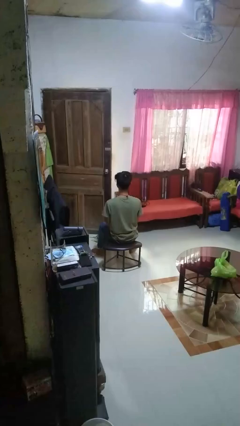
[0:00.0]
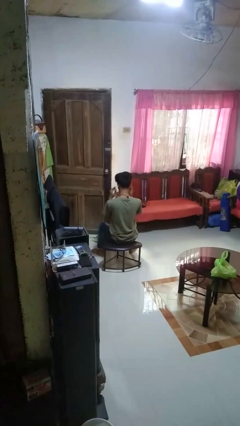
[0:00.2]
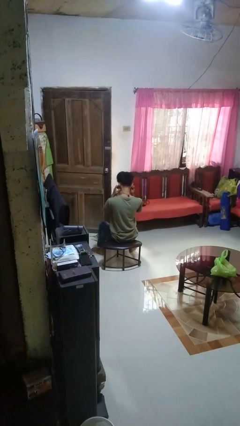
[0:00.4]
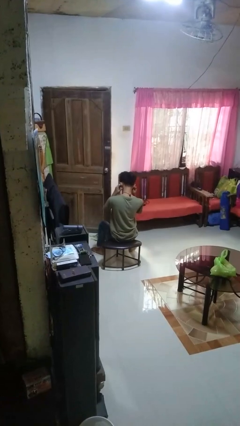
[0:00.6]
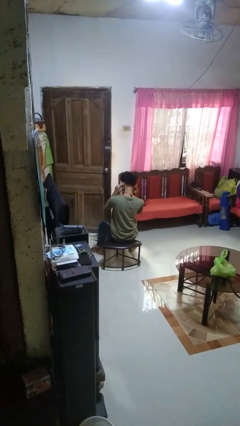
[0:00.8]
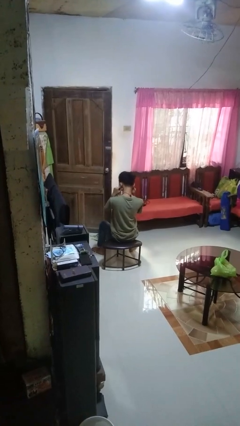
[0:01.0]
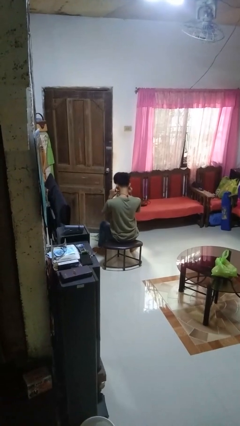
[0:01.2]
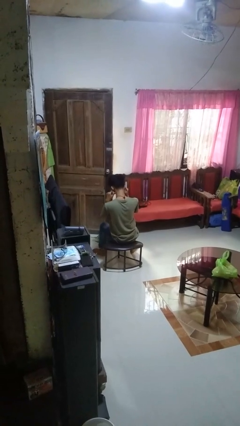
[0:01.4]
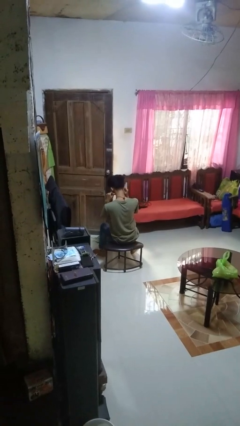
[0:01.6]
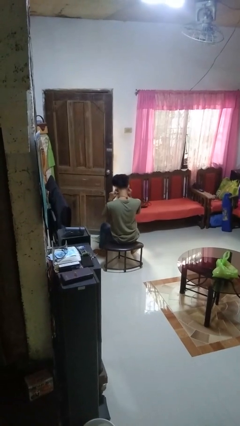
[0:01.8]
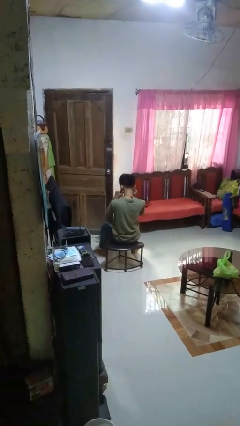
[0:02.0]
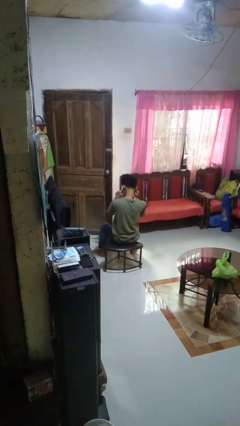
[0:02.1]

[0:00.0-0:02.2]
person puts fingers in ear

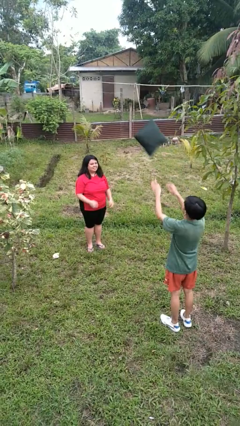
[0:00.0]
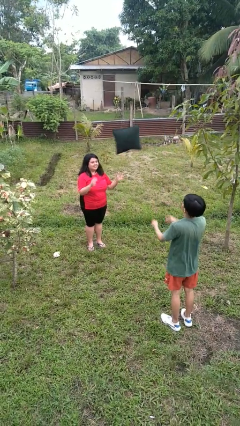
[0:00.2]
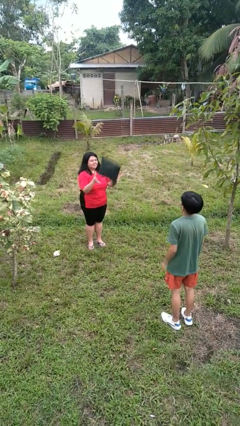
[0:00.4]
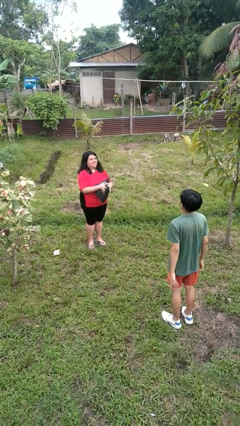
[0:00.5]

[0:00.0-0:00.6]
person catches object from person

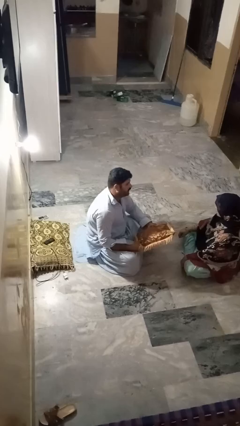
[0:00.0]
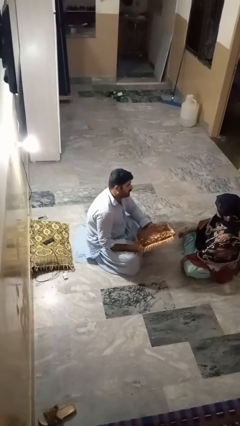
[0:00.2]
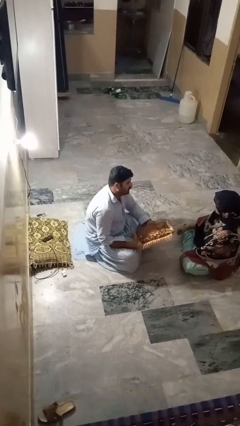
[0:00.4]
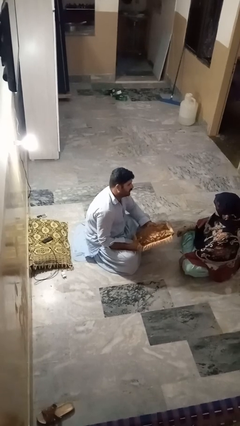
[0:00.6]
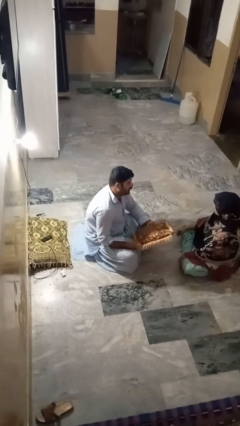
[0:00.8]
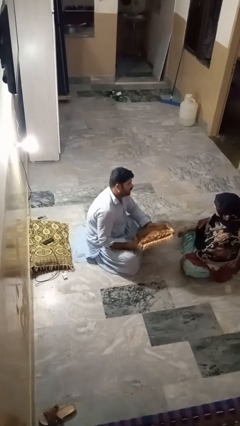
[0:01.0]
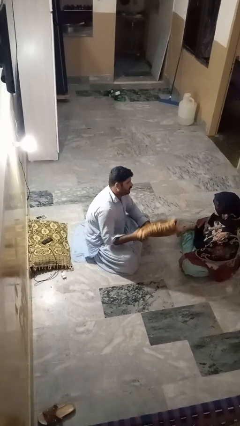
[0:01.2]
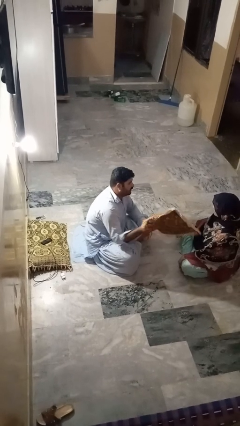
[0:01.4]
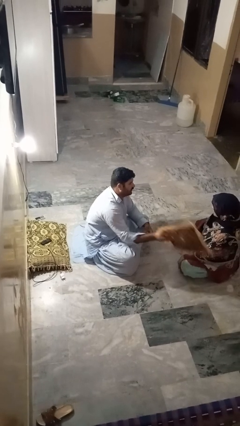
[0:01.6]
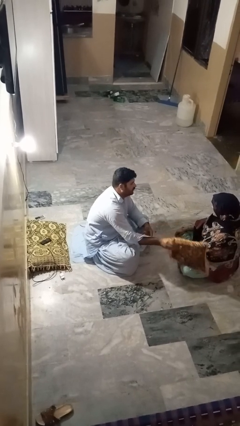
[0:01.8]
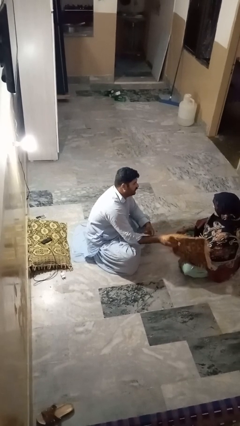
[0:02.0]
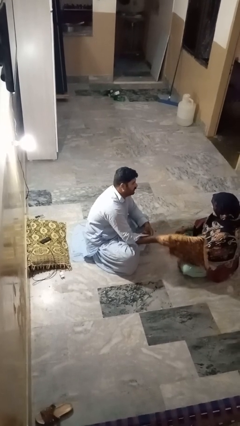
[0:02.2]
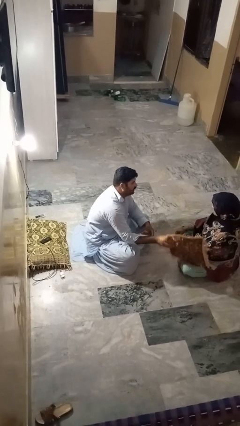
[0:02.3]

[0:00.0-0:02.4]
person hits person with pillow

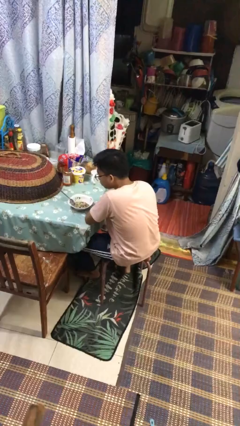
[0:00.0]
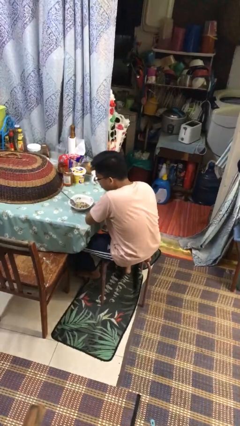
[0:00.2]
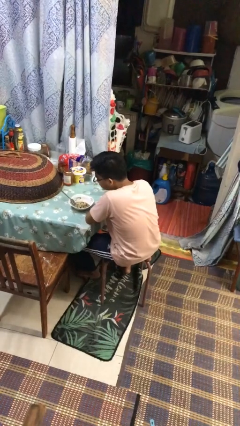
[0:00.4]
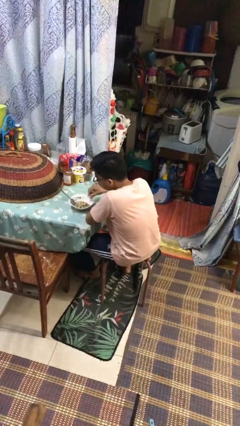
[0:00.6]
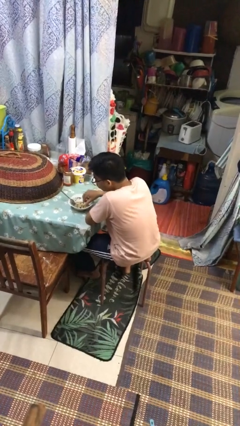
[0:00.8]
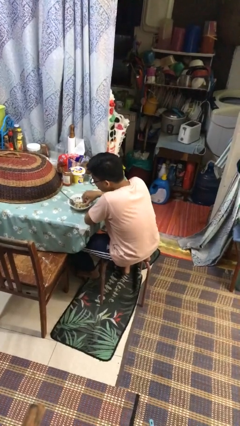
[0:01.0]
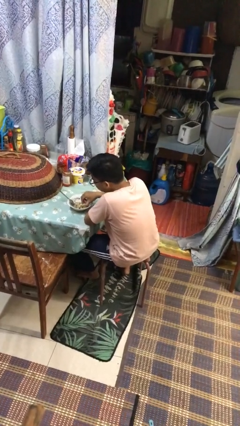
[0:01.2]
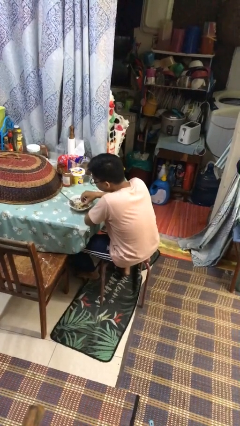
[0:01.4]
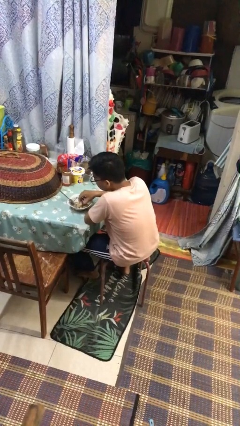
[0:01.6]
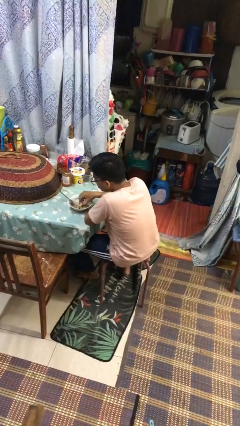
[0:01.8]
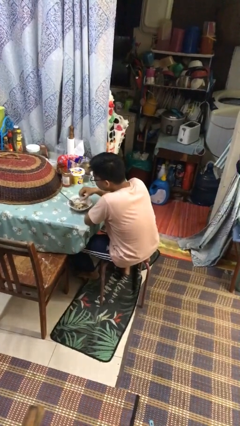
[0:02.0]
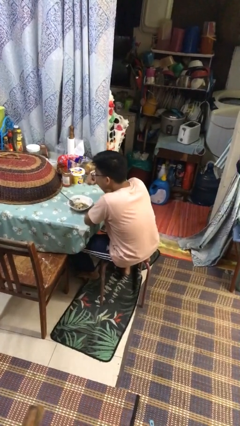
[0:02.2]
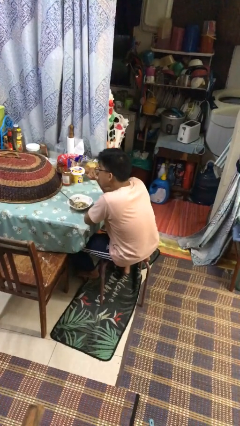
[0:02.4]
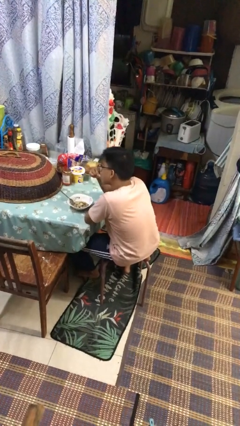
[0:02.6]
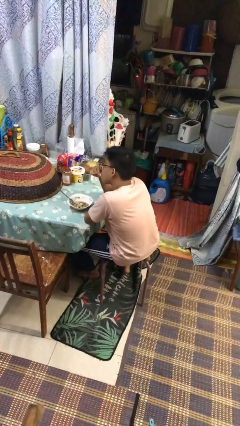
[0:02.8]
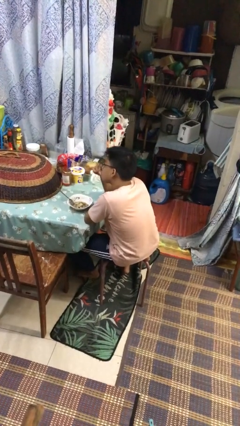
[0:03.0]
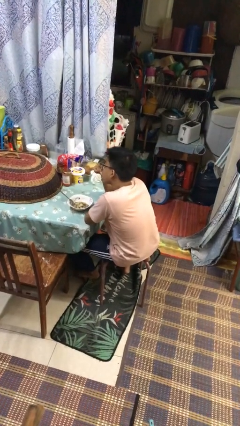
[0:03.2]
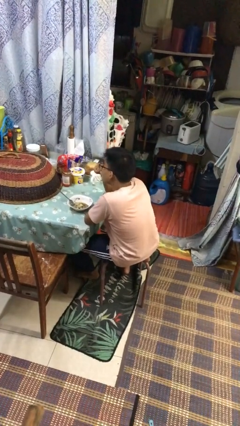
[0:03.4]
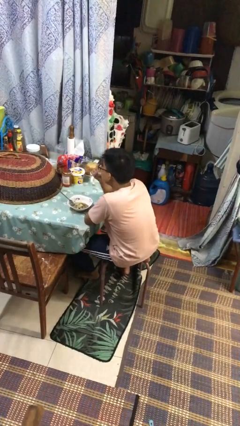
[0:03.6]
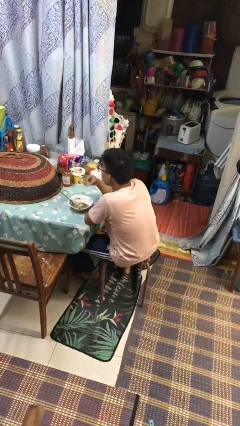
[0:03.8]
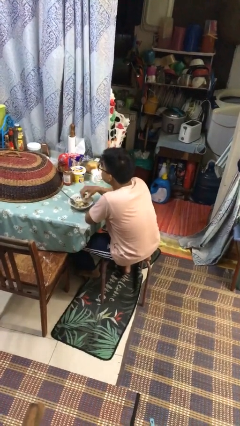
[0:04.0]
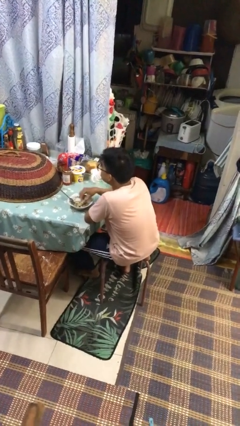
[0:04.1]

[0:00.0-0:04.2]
person eats with hands

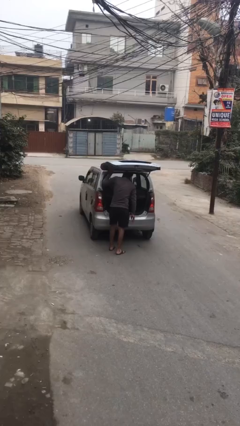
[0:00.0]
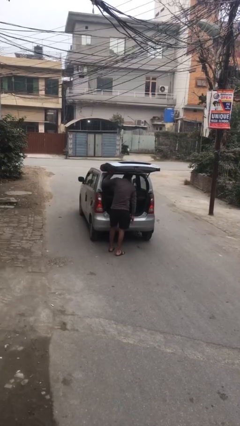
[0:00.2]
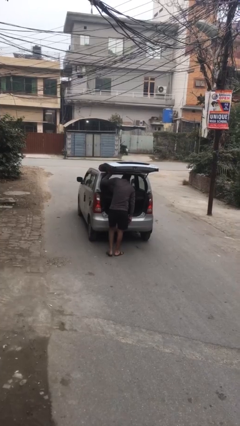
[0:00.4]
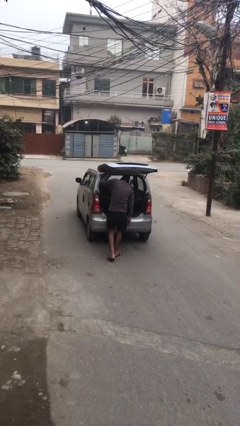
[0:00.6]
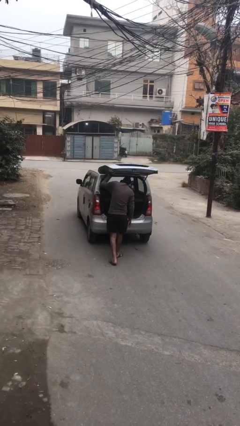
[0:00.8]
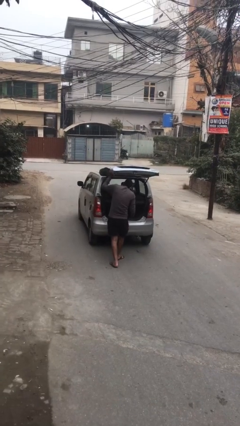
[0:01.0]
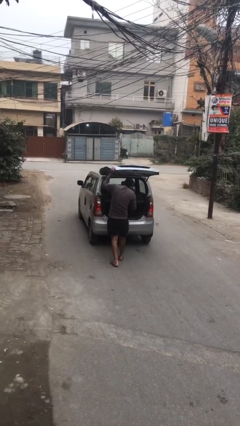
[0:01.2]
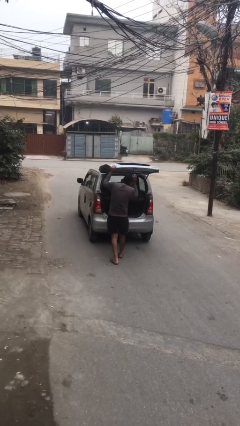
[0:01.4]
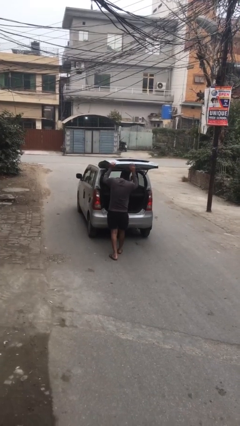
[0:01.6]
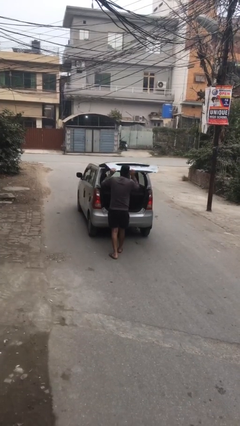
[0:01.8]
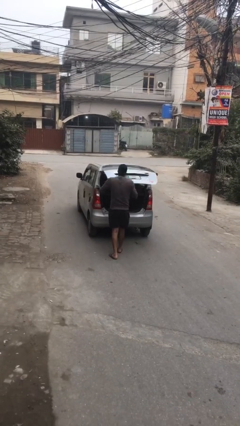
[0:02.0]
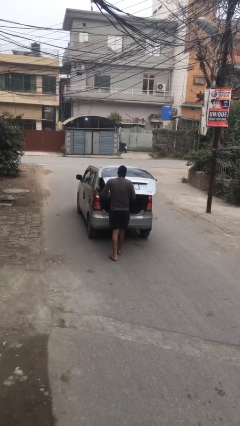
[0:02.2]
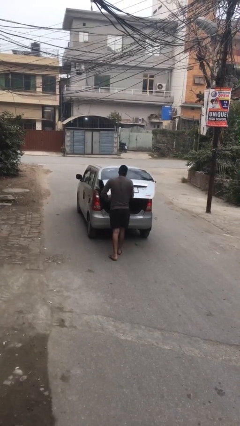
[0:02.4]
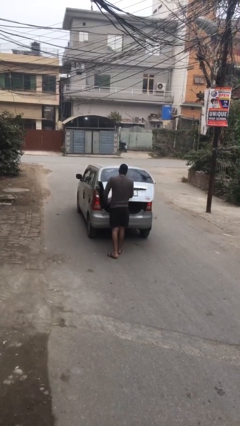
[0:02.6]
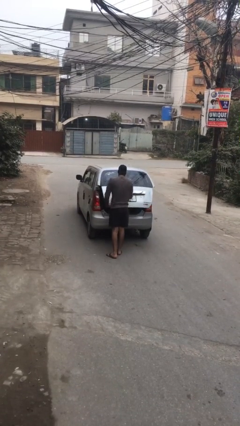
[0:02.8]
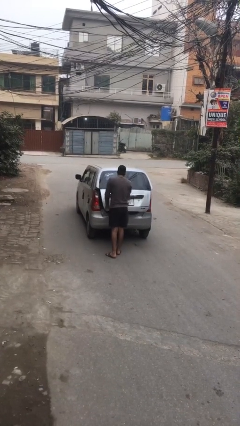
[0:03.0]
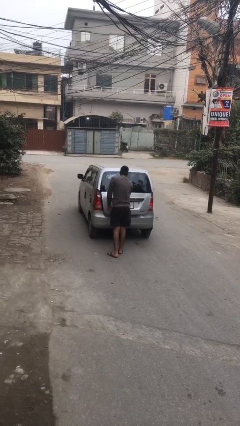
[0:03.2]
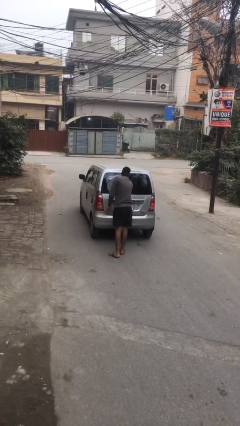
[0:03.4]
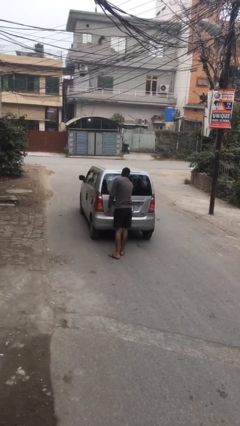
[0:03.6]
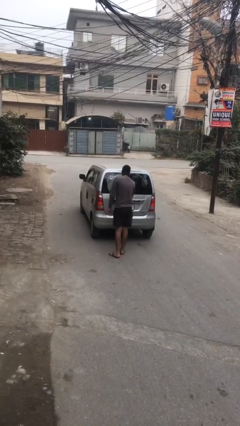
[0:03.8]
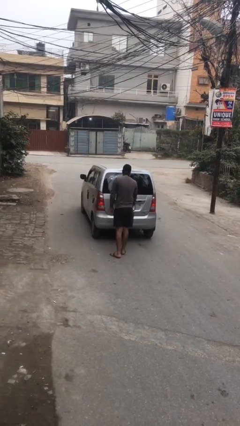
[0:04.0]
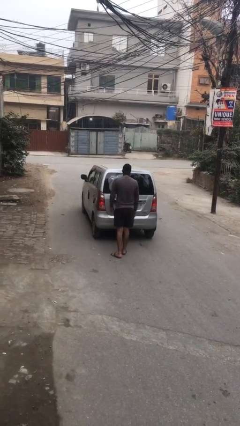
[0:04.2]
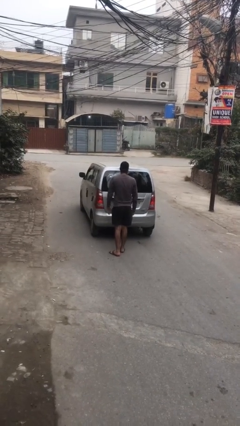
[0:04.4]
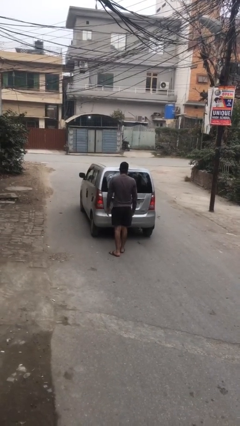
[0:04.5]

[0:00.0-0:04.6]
person closes car trunk

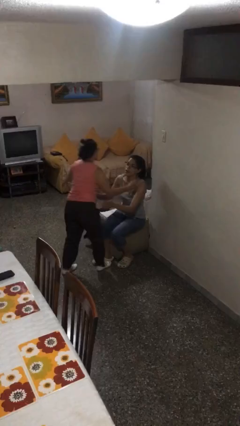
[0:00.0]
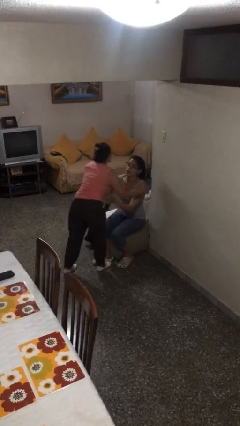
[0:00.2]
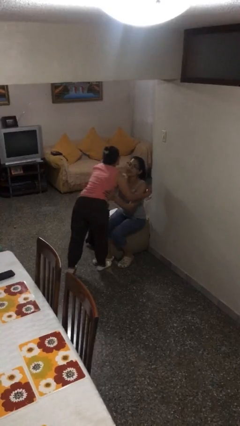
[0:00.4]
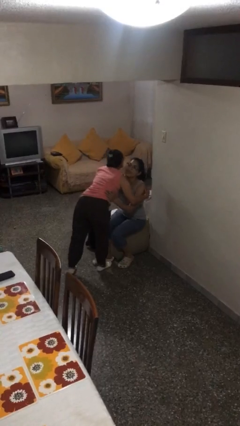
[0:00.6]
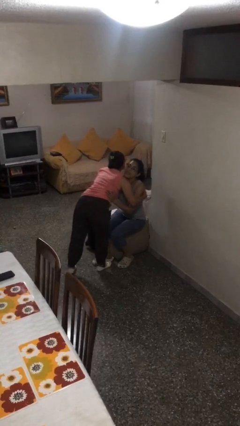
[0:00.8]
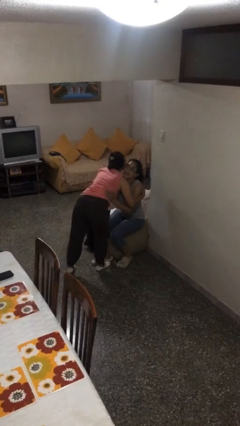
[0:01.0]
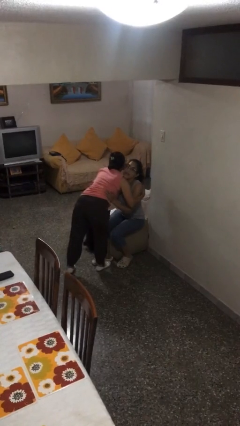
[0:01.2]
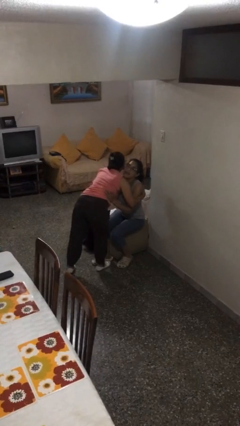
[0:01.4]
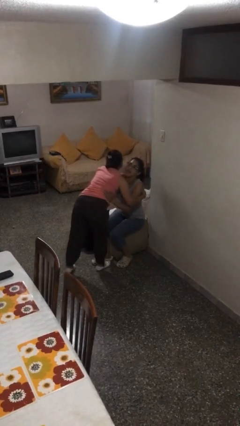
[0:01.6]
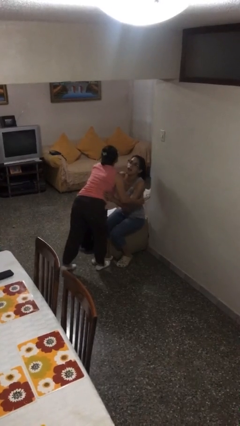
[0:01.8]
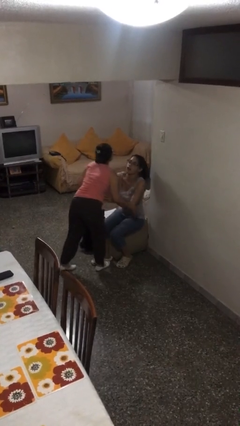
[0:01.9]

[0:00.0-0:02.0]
person embraces person

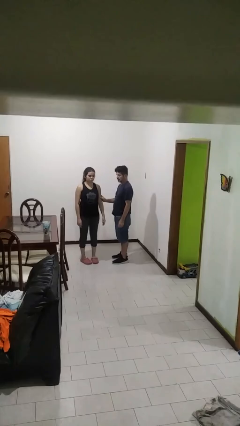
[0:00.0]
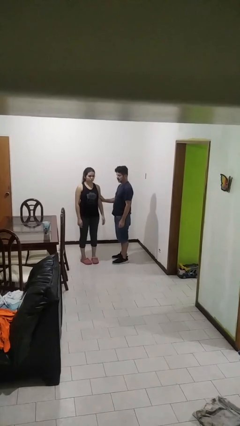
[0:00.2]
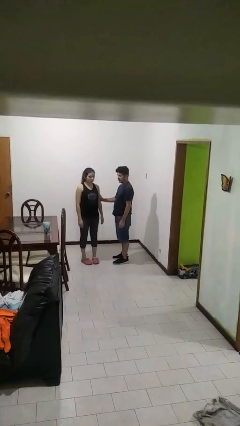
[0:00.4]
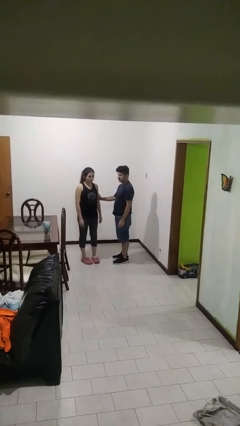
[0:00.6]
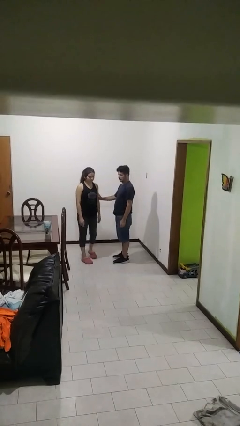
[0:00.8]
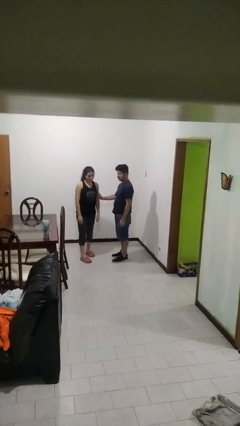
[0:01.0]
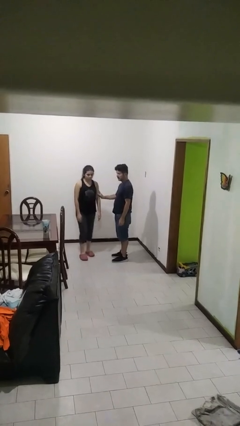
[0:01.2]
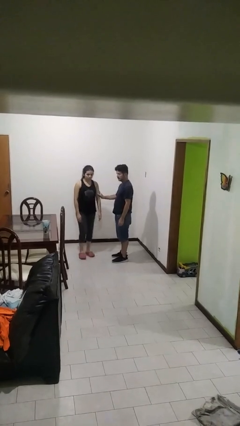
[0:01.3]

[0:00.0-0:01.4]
person grabs person by bicep
